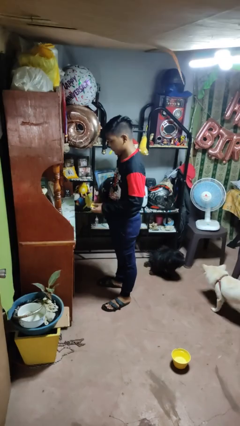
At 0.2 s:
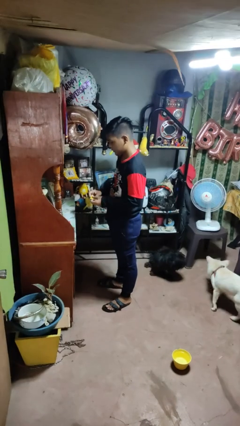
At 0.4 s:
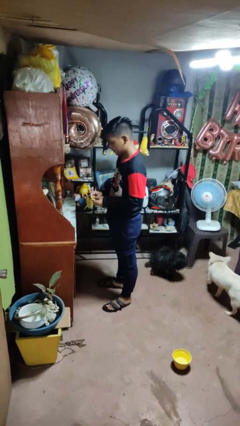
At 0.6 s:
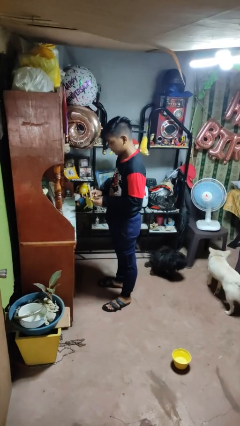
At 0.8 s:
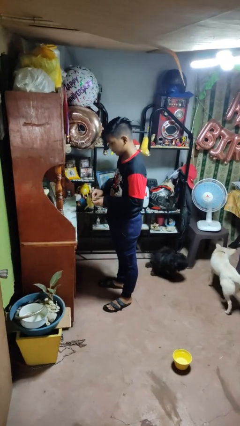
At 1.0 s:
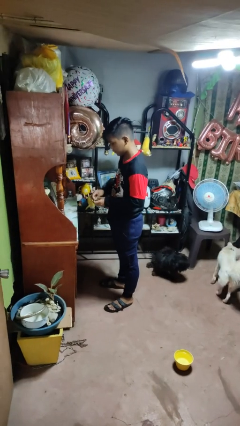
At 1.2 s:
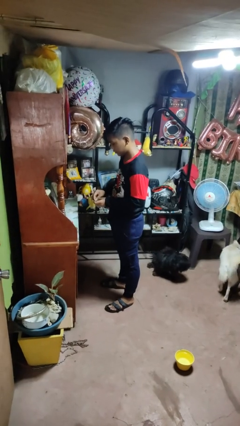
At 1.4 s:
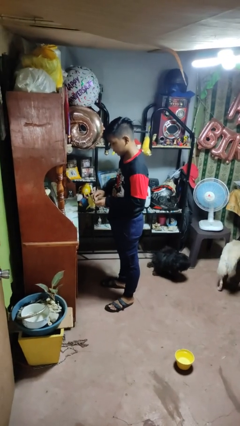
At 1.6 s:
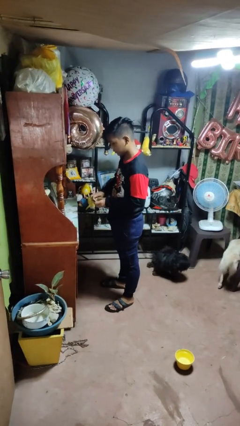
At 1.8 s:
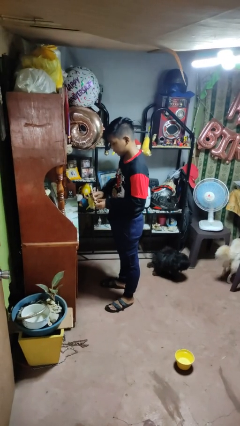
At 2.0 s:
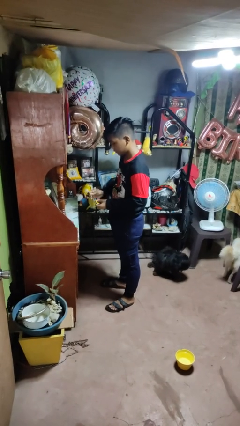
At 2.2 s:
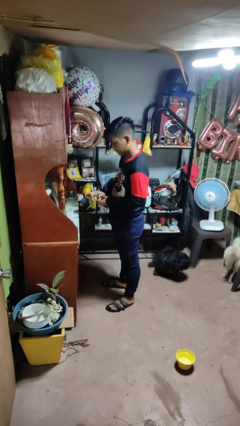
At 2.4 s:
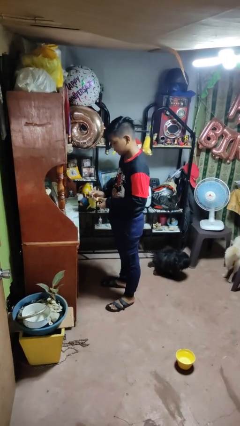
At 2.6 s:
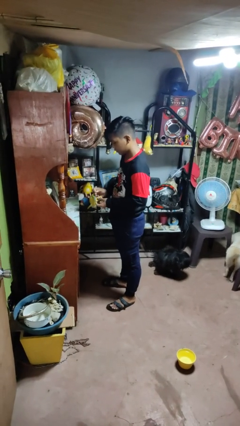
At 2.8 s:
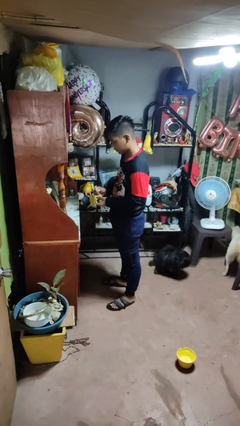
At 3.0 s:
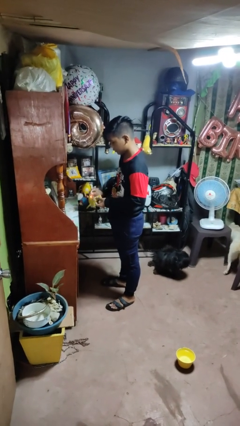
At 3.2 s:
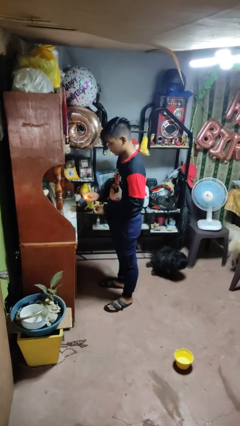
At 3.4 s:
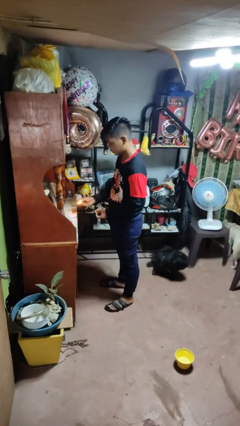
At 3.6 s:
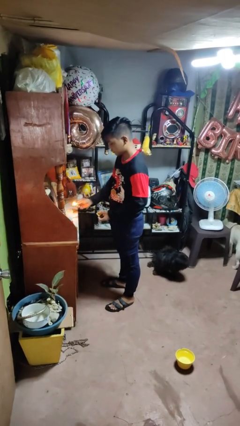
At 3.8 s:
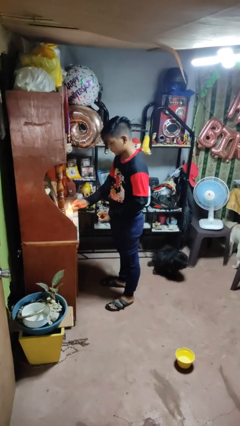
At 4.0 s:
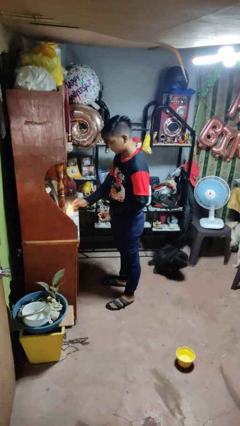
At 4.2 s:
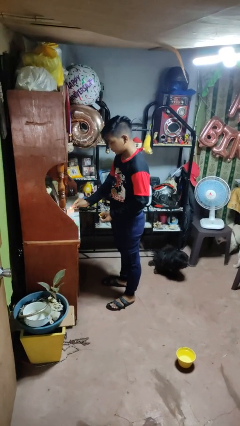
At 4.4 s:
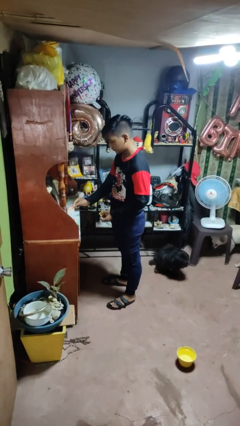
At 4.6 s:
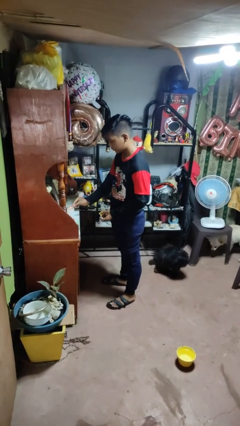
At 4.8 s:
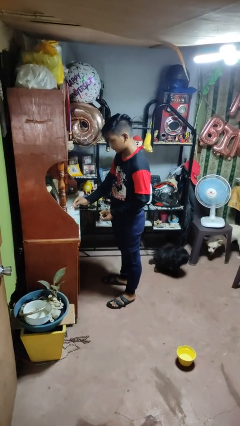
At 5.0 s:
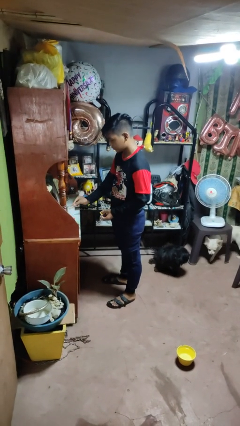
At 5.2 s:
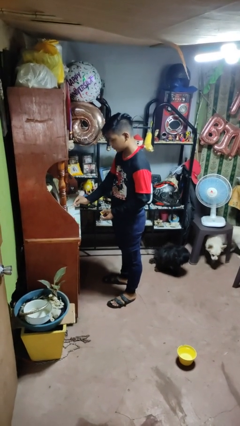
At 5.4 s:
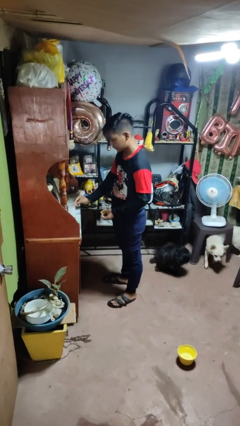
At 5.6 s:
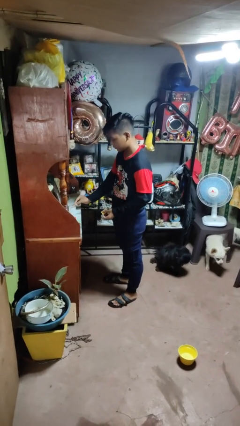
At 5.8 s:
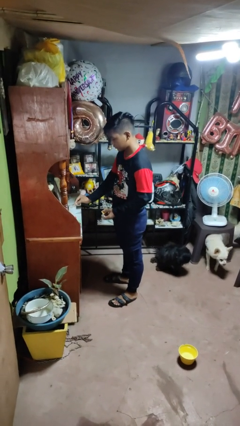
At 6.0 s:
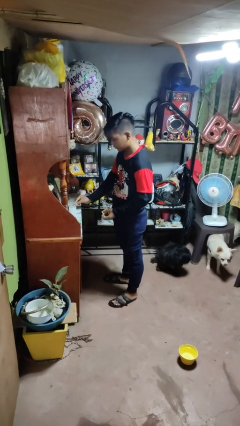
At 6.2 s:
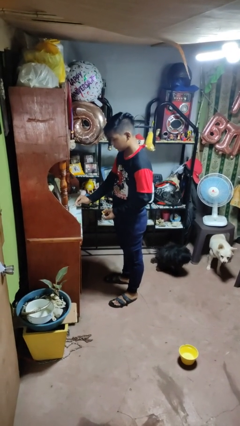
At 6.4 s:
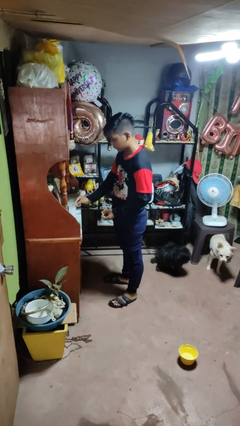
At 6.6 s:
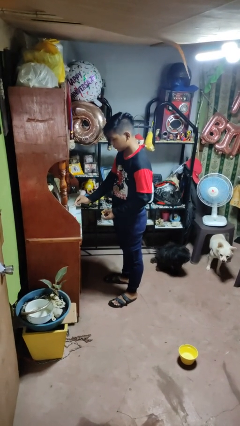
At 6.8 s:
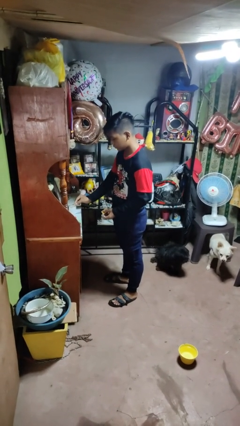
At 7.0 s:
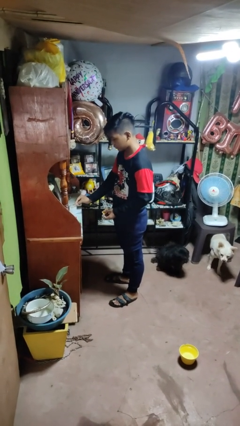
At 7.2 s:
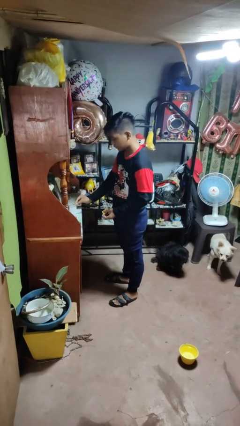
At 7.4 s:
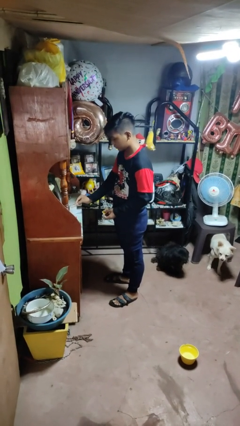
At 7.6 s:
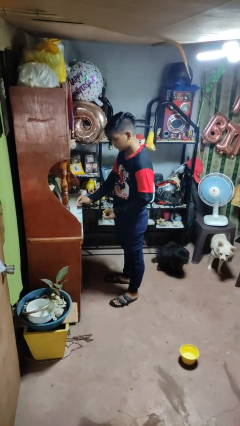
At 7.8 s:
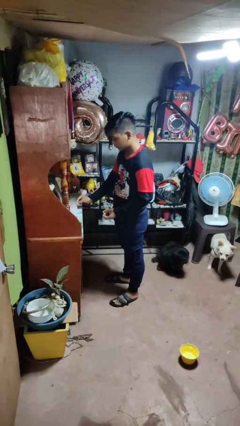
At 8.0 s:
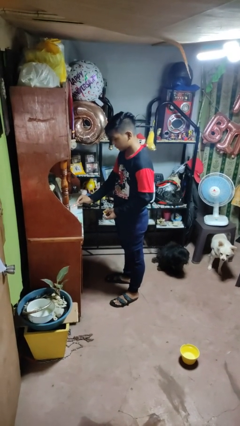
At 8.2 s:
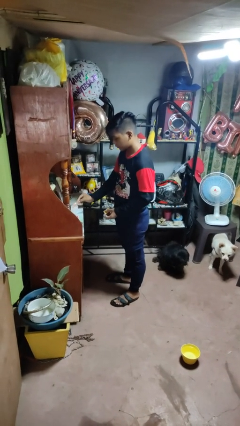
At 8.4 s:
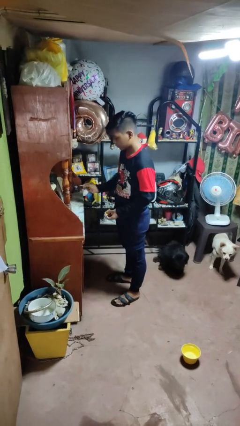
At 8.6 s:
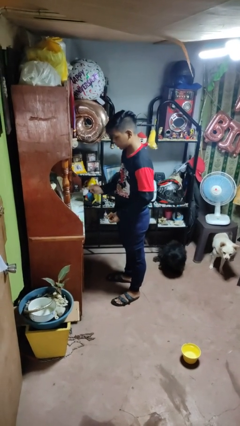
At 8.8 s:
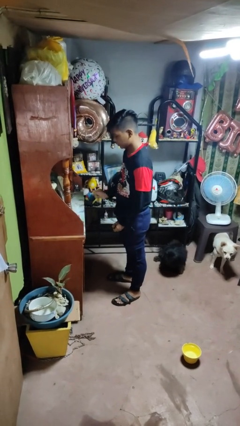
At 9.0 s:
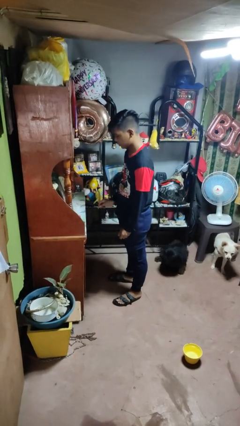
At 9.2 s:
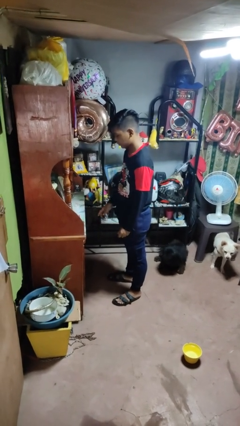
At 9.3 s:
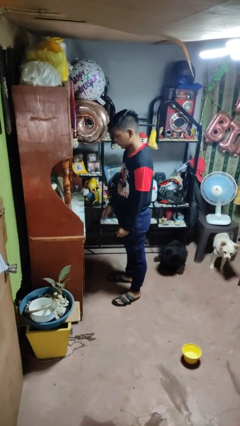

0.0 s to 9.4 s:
person lights candle

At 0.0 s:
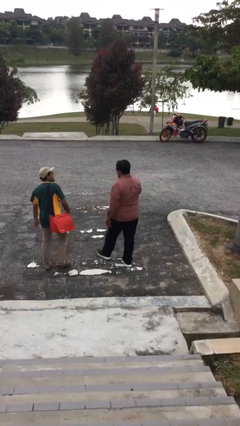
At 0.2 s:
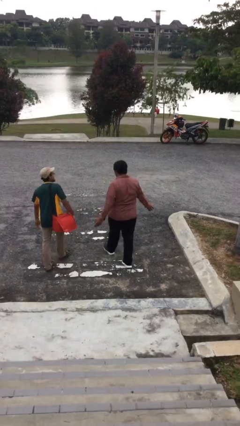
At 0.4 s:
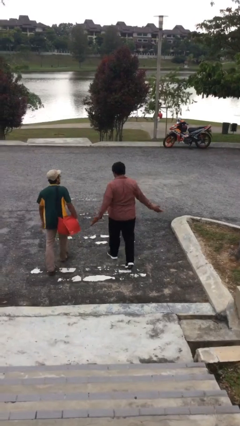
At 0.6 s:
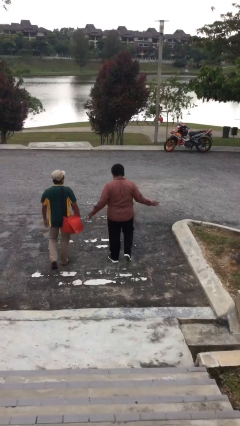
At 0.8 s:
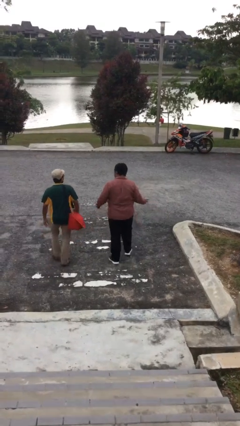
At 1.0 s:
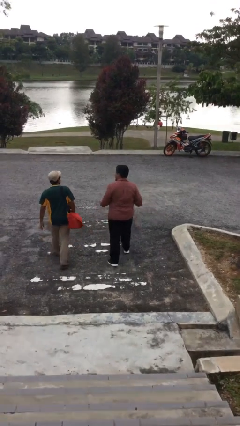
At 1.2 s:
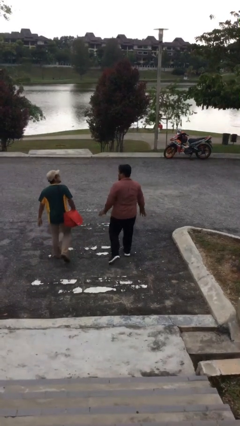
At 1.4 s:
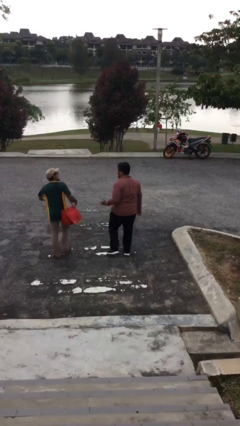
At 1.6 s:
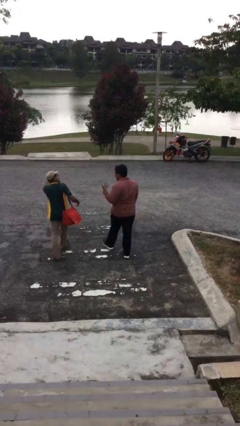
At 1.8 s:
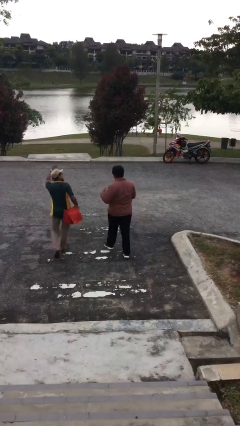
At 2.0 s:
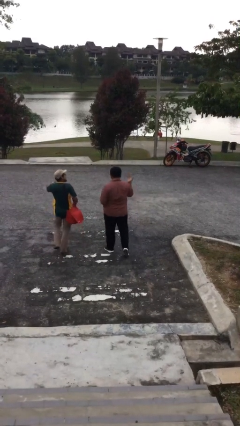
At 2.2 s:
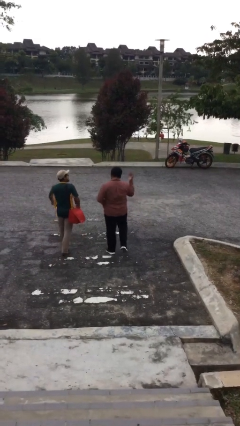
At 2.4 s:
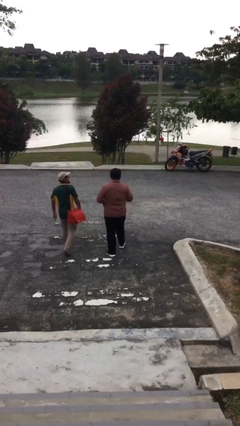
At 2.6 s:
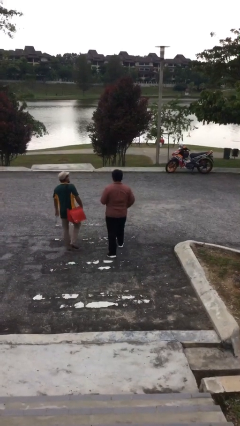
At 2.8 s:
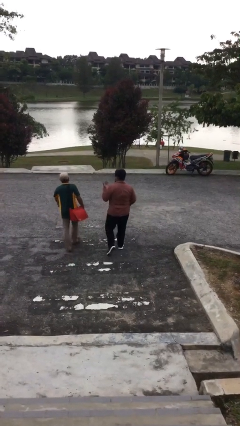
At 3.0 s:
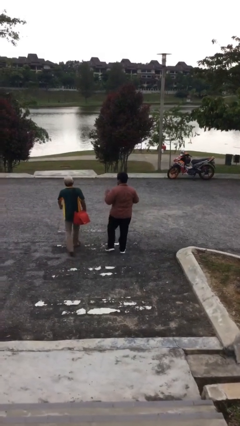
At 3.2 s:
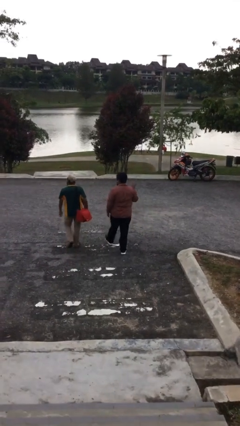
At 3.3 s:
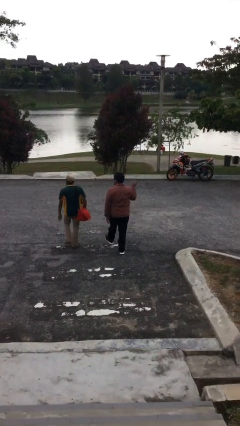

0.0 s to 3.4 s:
person talks to person

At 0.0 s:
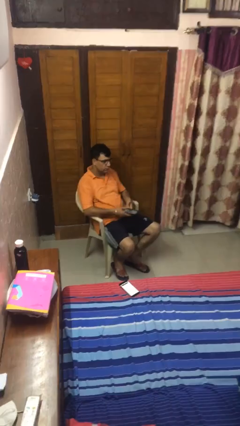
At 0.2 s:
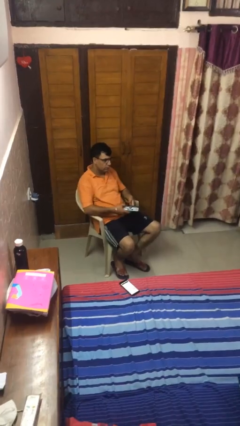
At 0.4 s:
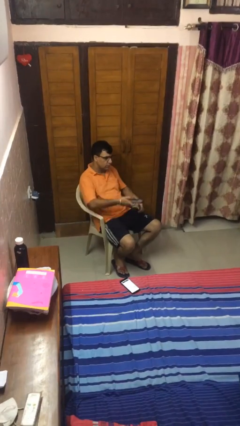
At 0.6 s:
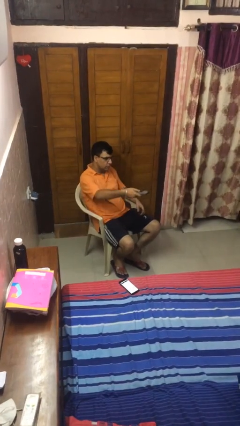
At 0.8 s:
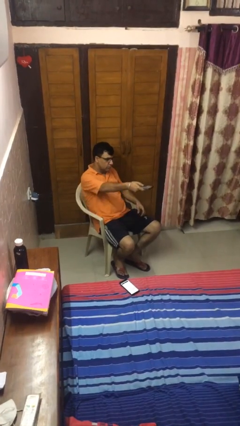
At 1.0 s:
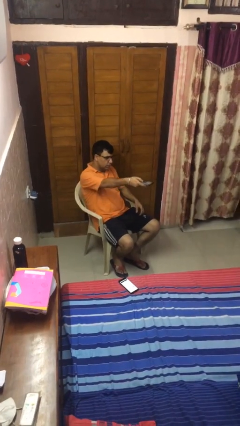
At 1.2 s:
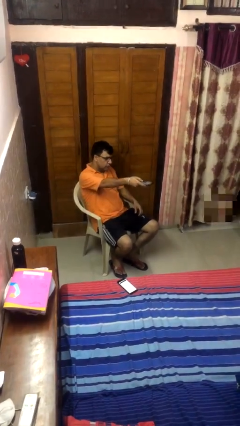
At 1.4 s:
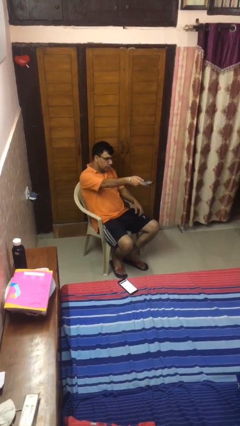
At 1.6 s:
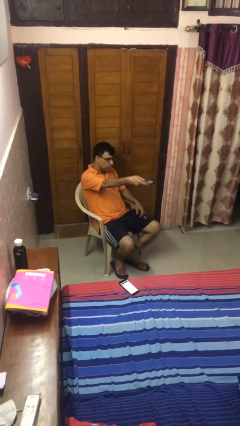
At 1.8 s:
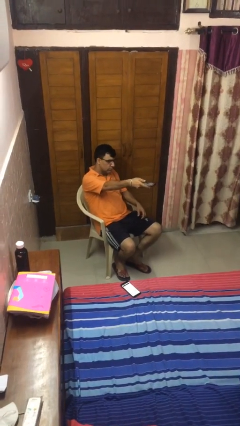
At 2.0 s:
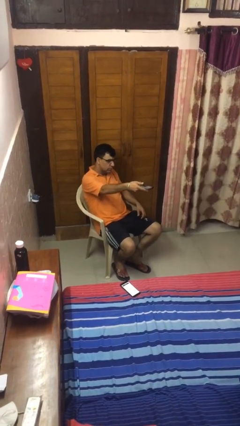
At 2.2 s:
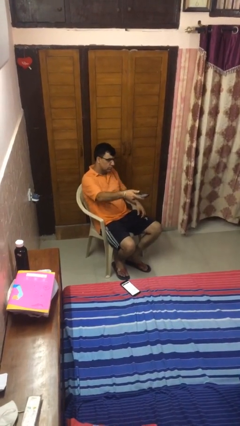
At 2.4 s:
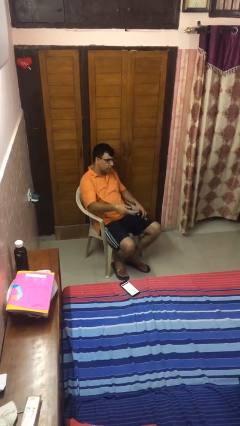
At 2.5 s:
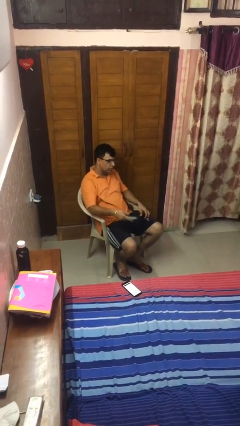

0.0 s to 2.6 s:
person uses television remote

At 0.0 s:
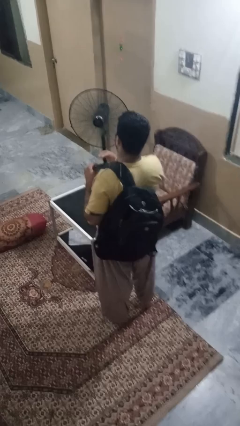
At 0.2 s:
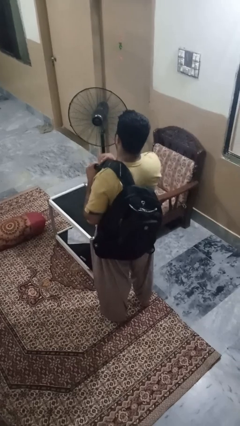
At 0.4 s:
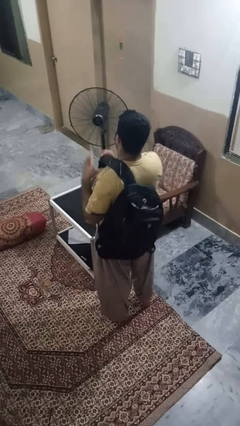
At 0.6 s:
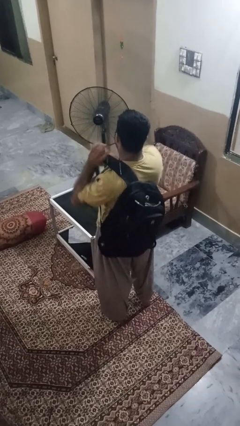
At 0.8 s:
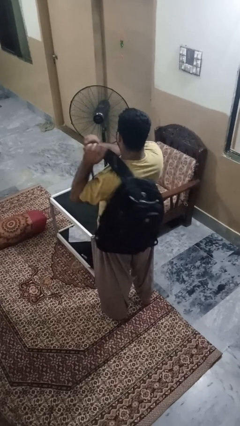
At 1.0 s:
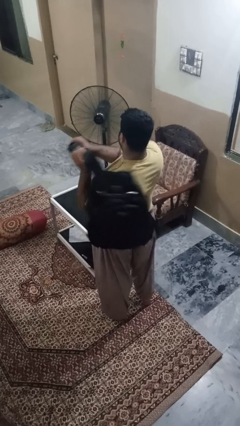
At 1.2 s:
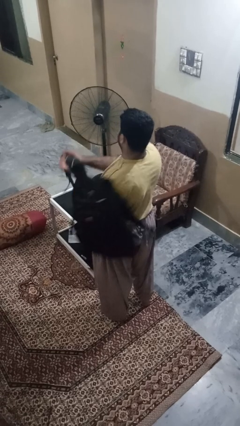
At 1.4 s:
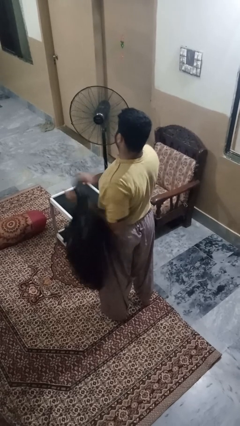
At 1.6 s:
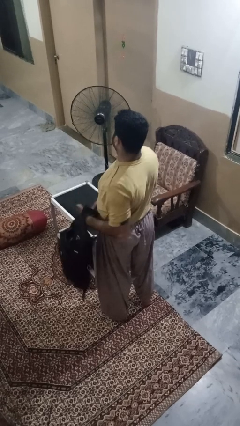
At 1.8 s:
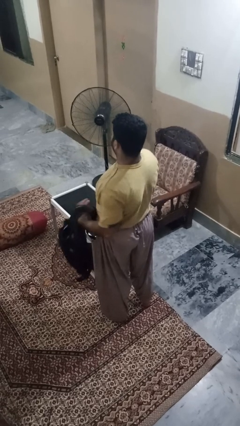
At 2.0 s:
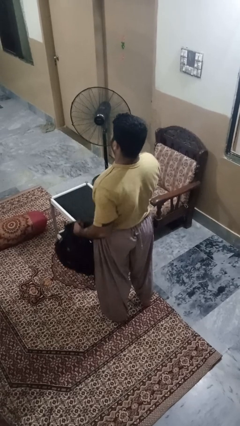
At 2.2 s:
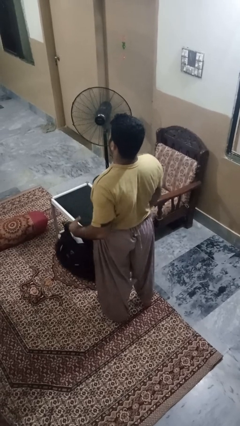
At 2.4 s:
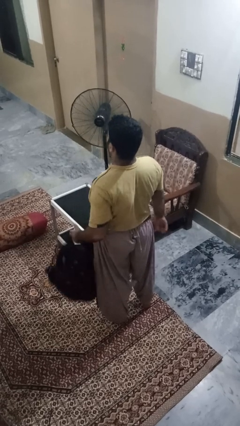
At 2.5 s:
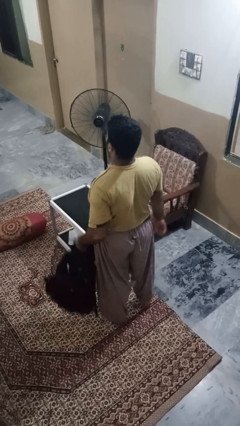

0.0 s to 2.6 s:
person takes off backpack
